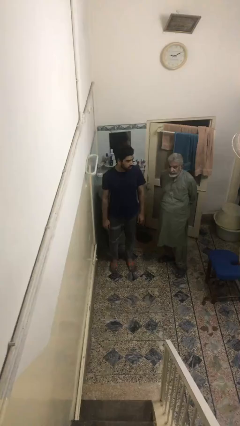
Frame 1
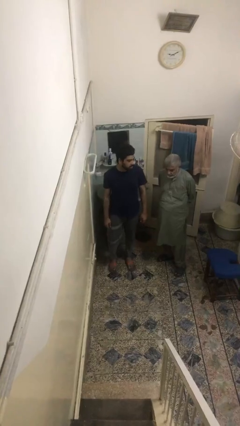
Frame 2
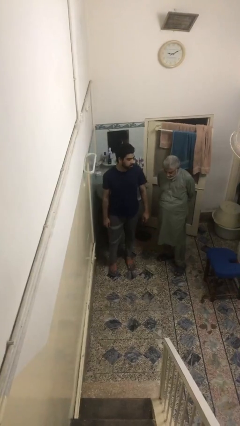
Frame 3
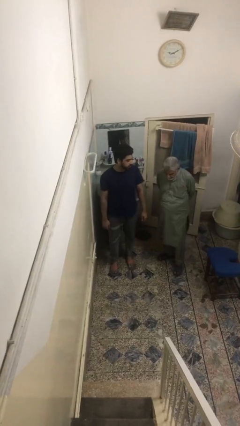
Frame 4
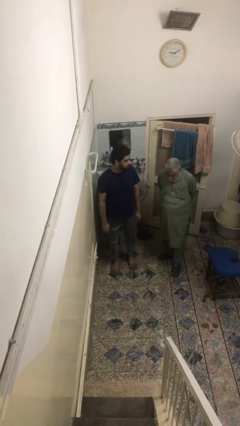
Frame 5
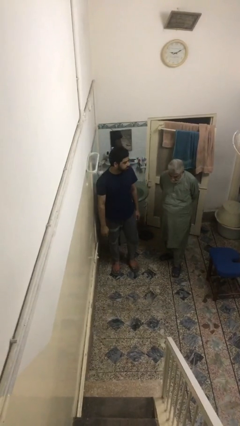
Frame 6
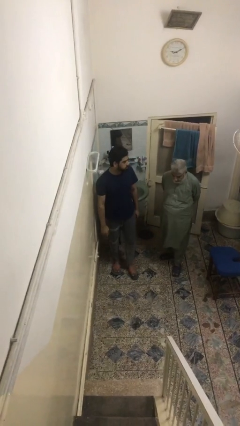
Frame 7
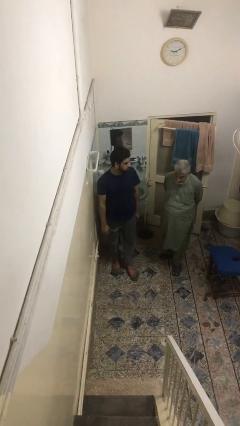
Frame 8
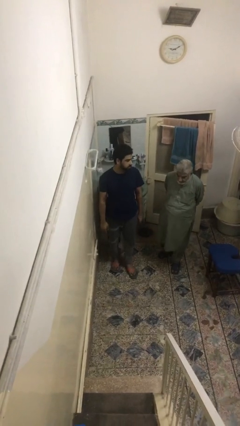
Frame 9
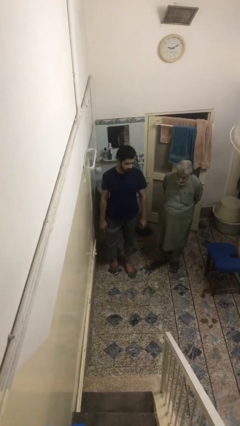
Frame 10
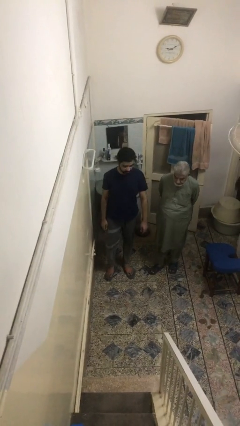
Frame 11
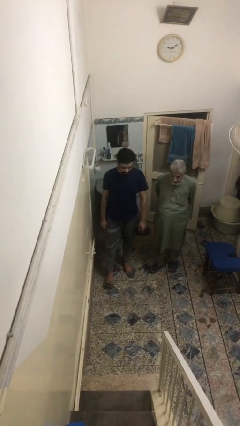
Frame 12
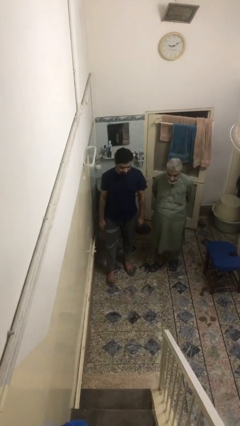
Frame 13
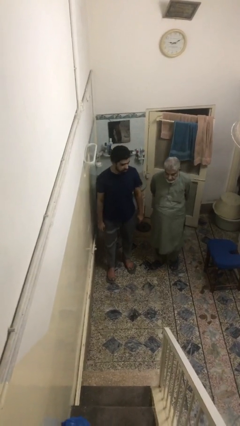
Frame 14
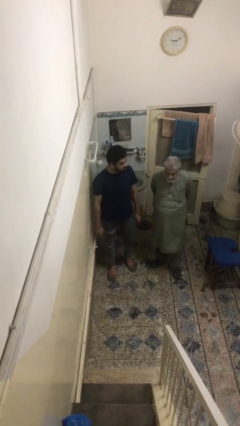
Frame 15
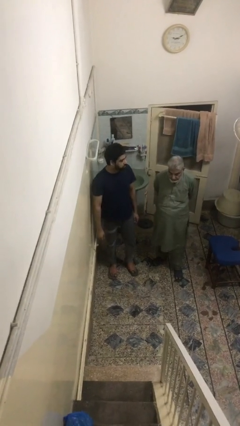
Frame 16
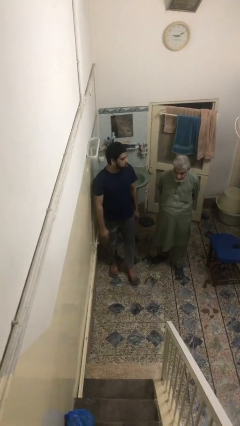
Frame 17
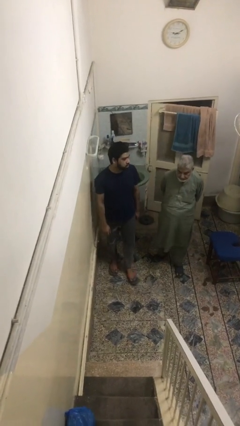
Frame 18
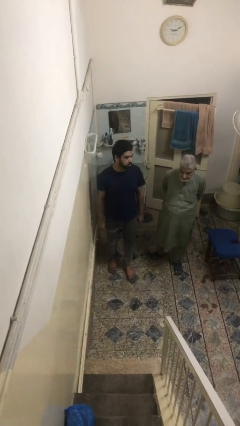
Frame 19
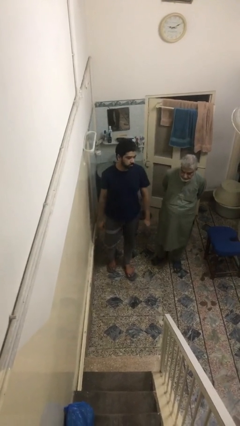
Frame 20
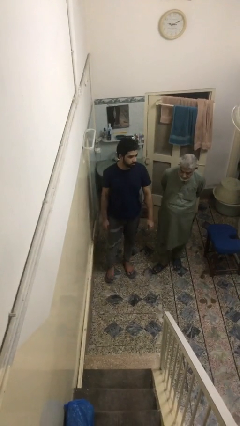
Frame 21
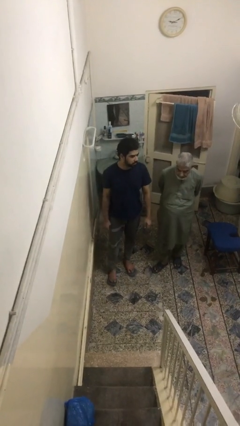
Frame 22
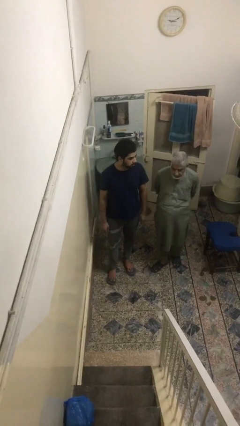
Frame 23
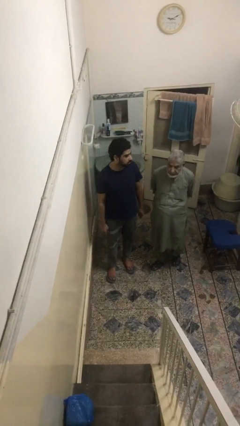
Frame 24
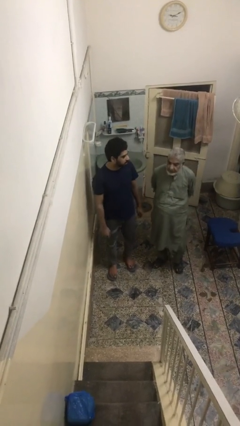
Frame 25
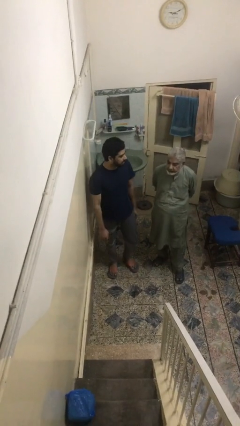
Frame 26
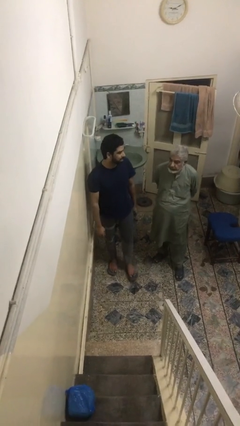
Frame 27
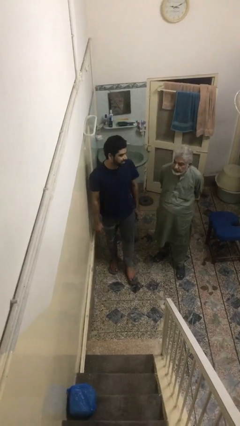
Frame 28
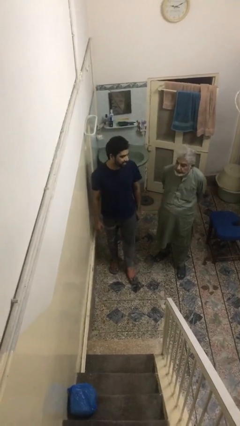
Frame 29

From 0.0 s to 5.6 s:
person talks to person

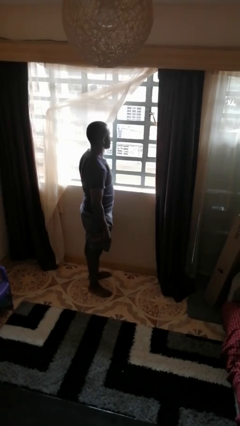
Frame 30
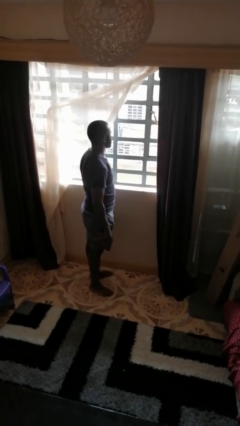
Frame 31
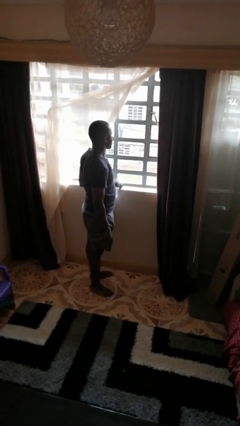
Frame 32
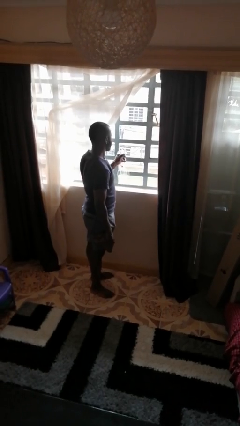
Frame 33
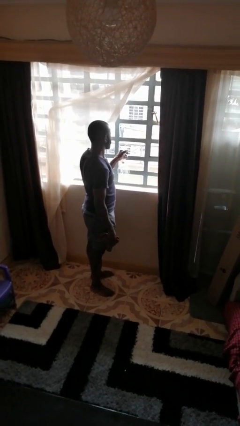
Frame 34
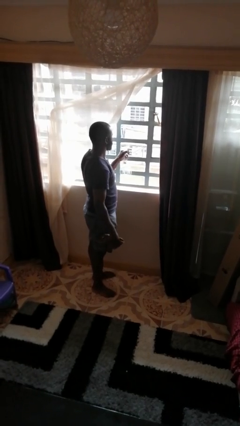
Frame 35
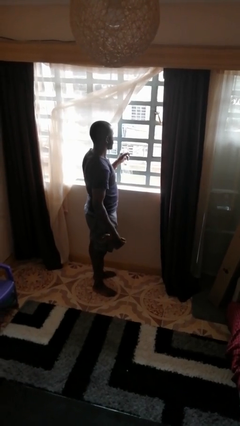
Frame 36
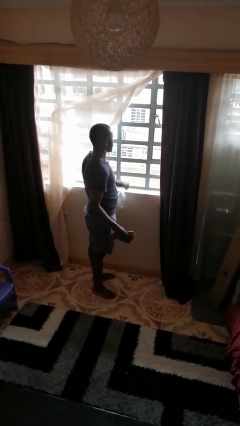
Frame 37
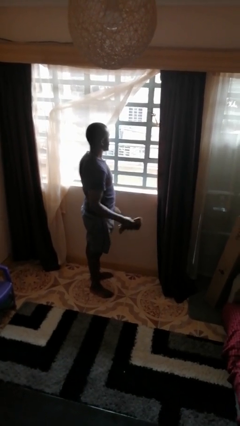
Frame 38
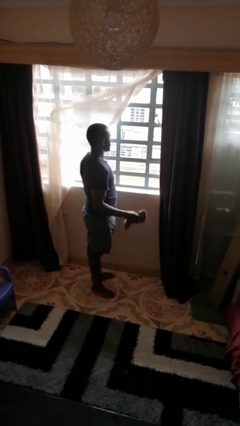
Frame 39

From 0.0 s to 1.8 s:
person sprays from bottle

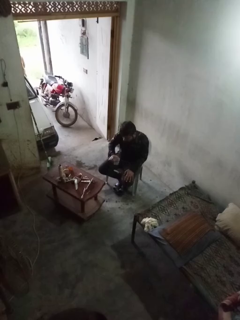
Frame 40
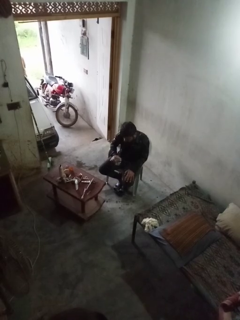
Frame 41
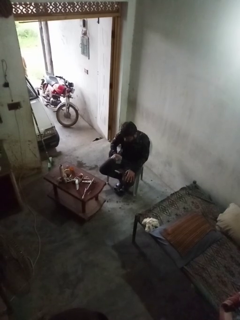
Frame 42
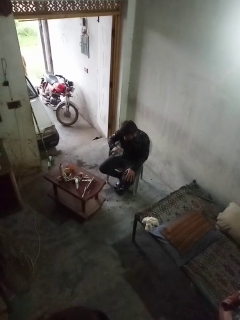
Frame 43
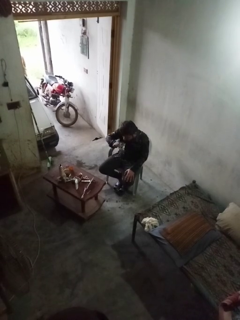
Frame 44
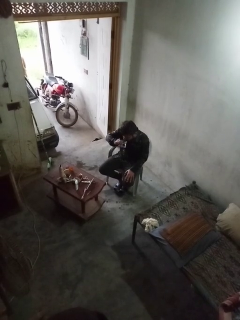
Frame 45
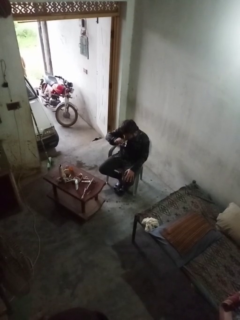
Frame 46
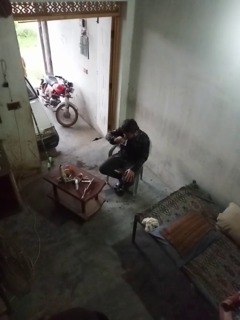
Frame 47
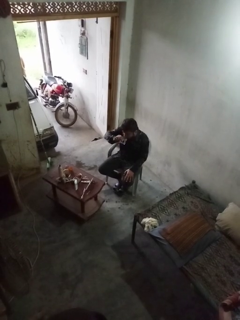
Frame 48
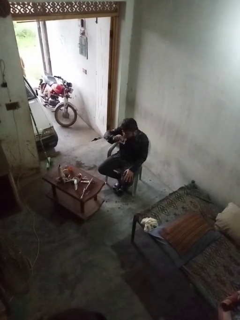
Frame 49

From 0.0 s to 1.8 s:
person drinks from shotglass

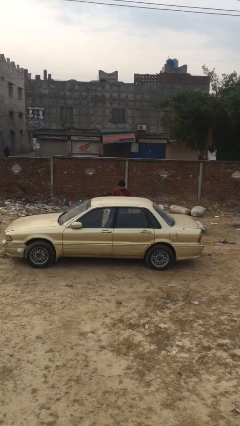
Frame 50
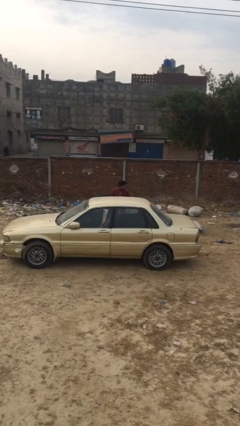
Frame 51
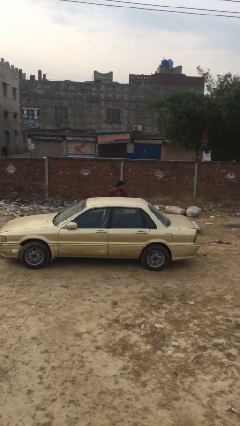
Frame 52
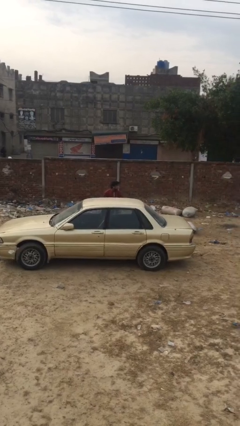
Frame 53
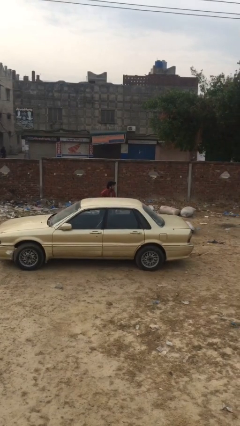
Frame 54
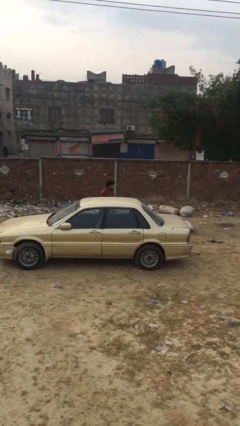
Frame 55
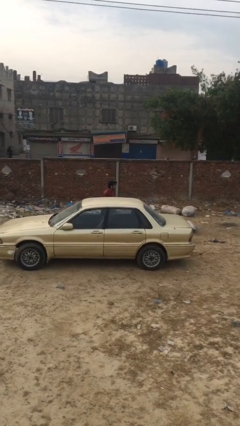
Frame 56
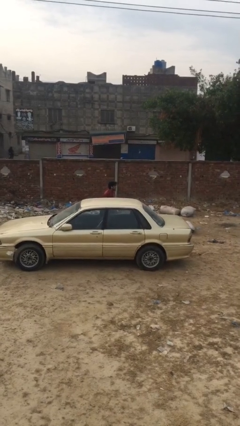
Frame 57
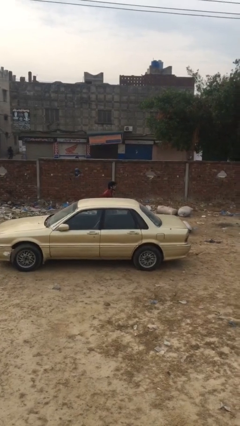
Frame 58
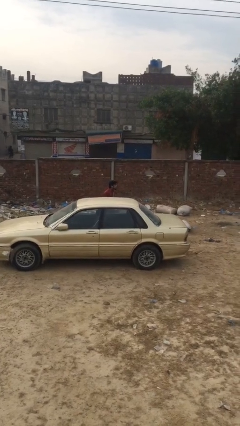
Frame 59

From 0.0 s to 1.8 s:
person closes car door

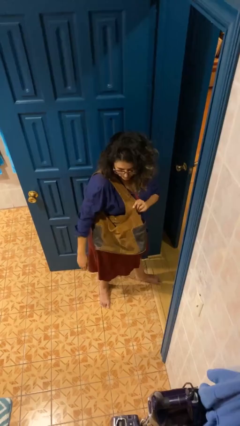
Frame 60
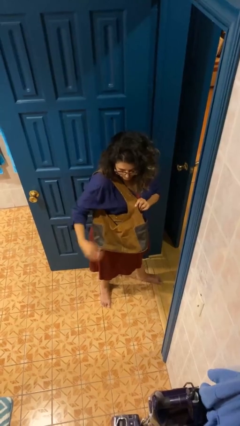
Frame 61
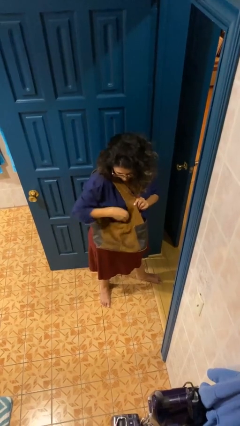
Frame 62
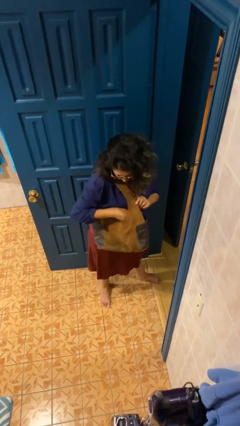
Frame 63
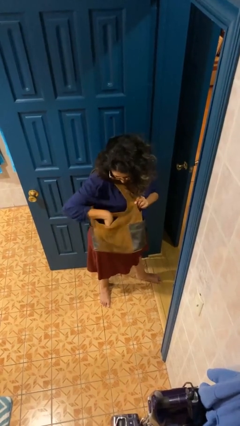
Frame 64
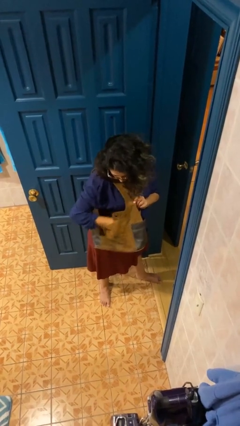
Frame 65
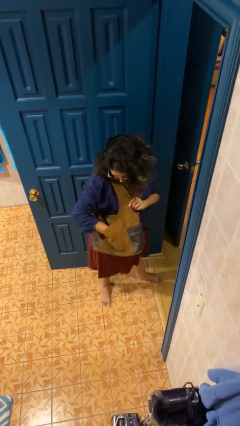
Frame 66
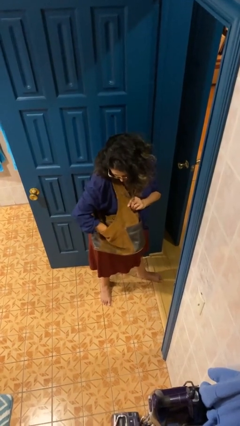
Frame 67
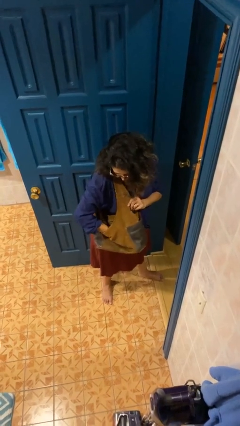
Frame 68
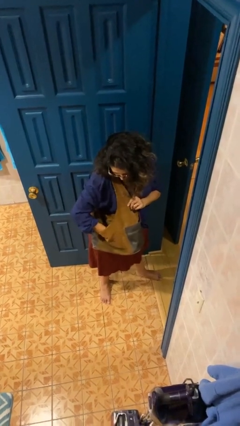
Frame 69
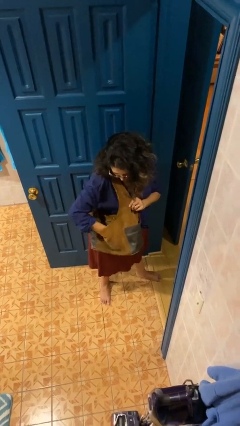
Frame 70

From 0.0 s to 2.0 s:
person searches in purse

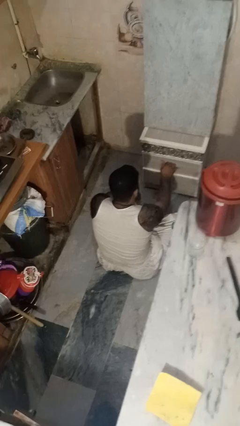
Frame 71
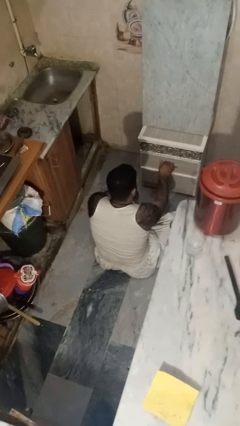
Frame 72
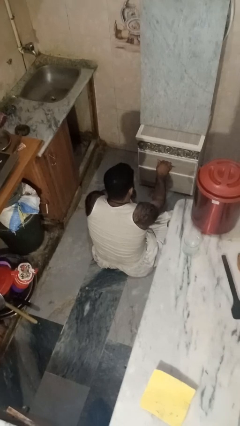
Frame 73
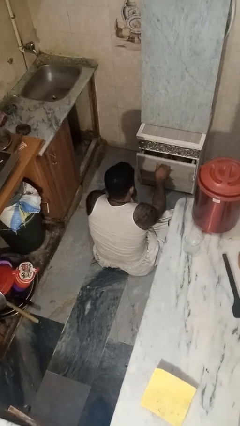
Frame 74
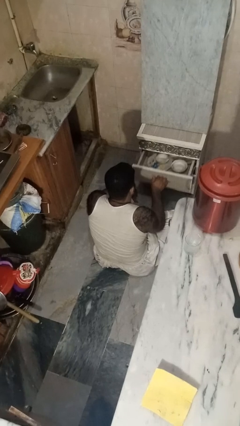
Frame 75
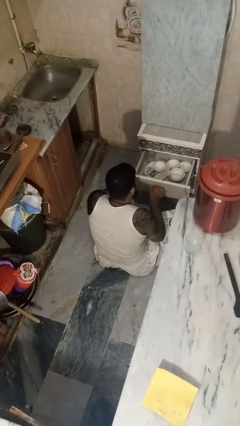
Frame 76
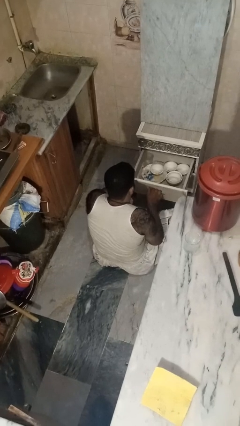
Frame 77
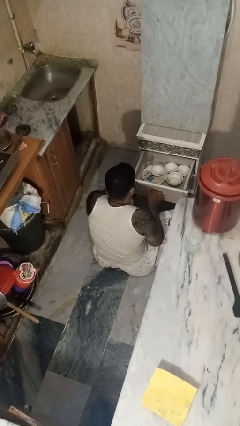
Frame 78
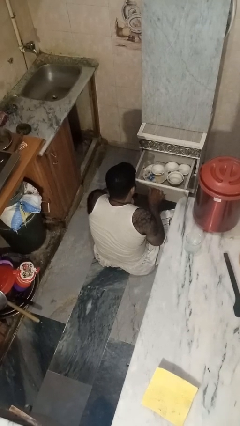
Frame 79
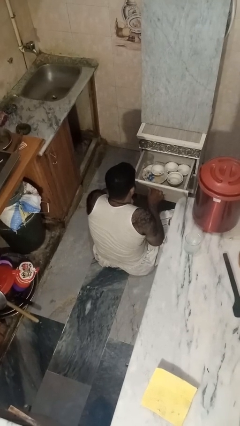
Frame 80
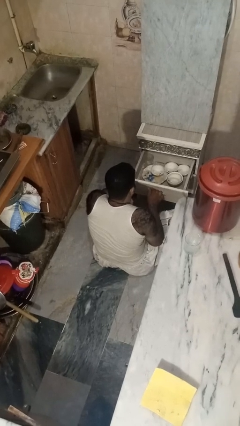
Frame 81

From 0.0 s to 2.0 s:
person opens kitchen drawer

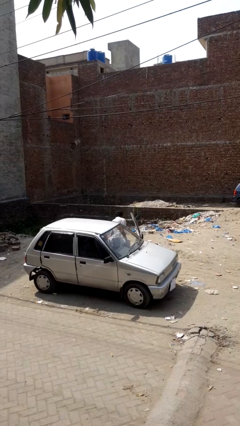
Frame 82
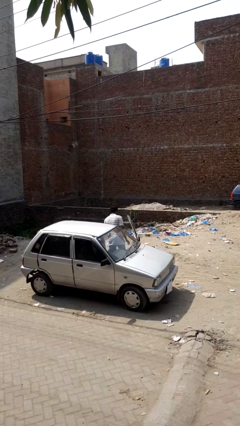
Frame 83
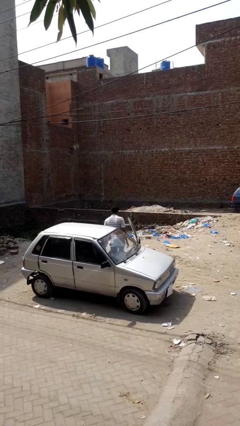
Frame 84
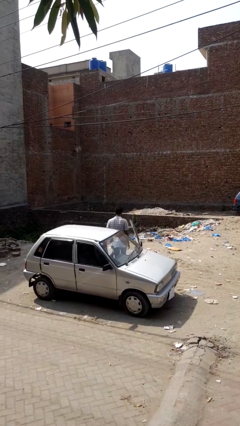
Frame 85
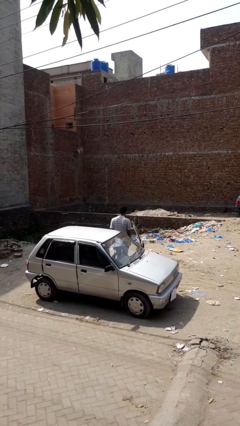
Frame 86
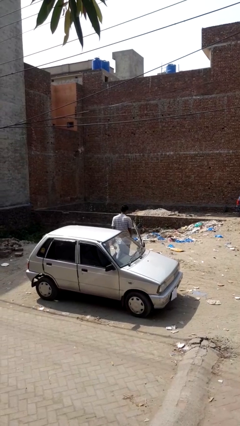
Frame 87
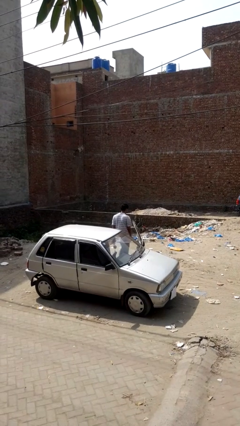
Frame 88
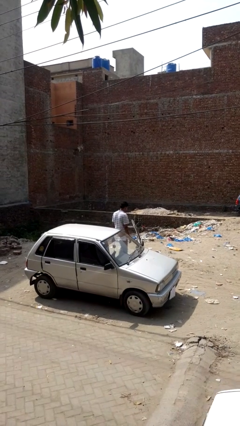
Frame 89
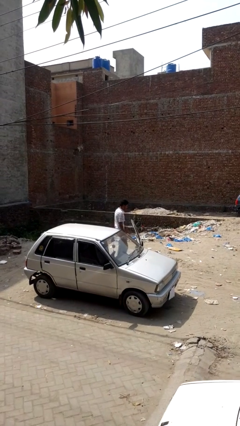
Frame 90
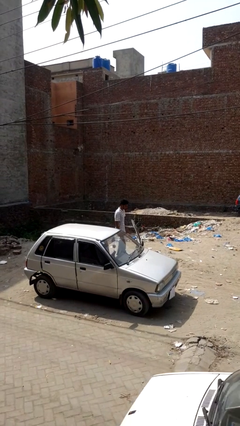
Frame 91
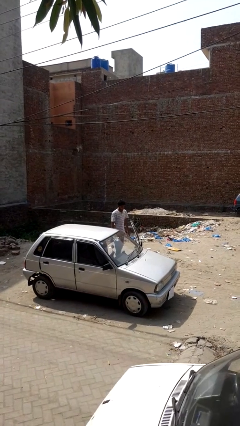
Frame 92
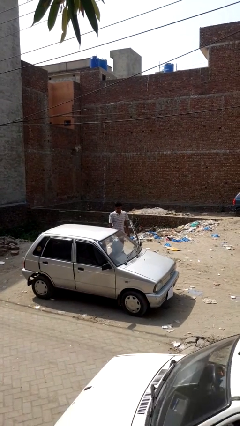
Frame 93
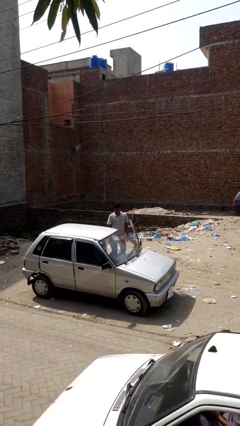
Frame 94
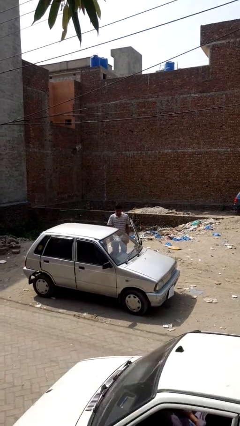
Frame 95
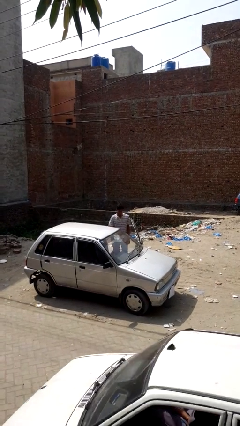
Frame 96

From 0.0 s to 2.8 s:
person exits car
